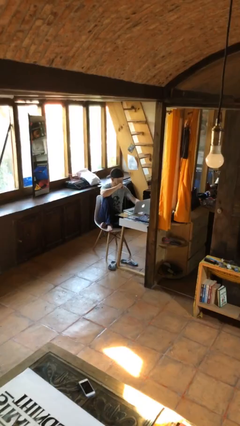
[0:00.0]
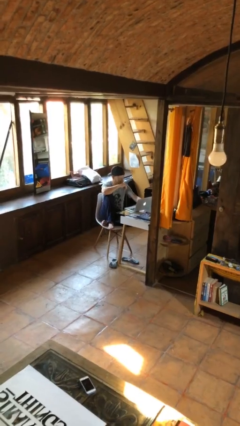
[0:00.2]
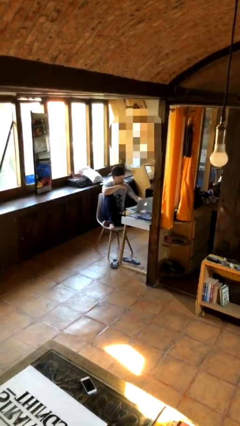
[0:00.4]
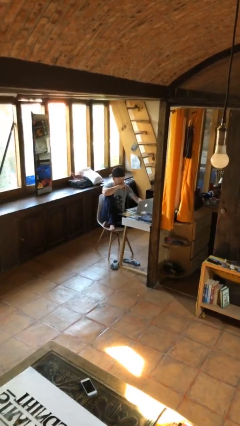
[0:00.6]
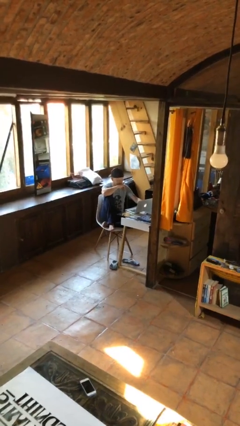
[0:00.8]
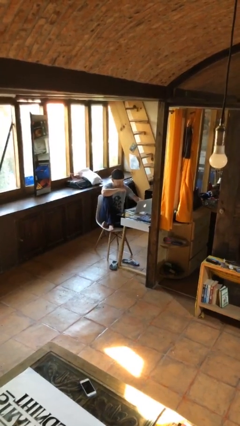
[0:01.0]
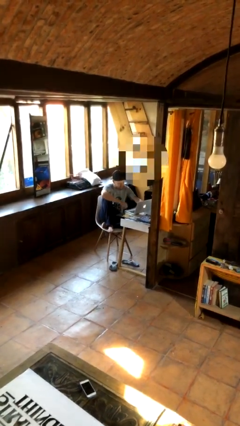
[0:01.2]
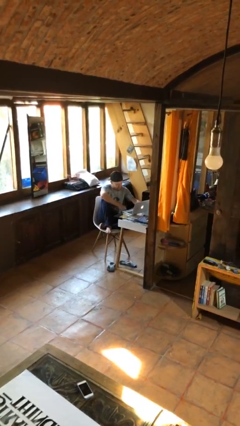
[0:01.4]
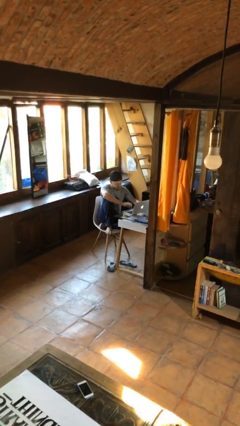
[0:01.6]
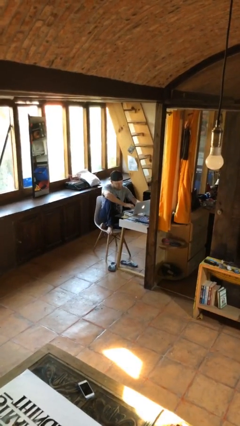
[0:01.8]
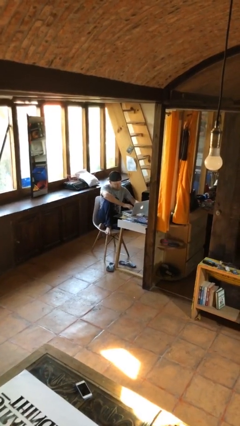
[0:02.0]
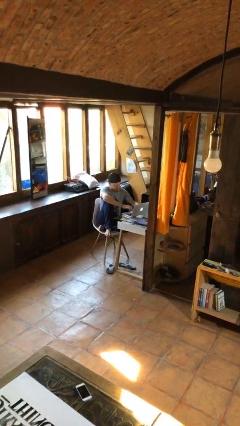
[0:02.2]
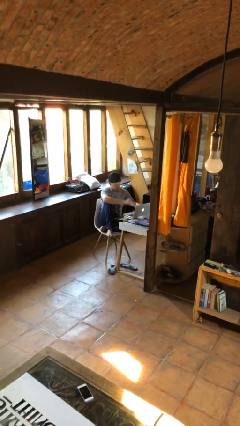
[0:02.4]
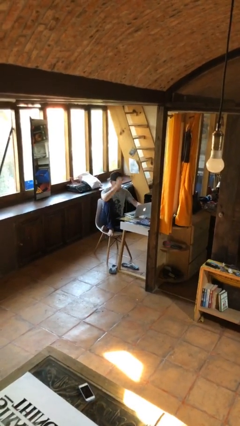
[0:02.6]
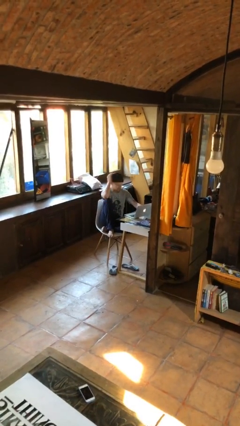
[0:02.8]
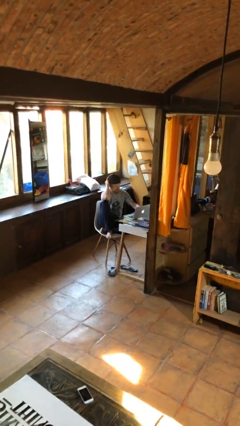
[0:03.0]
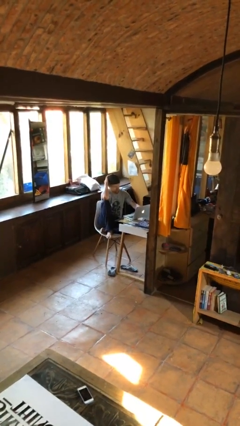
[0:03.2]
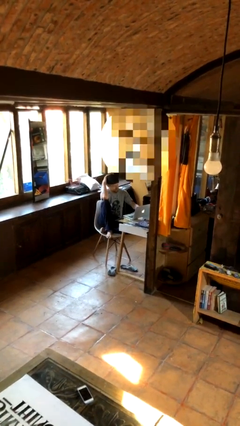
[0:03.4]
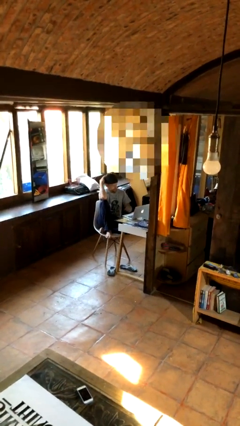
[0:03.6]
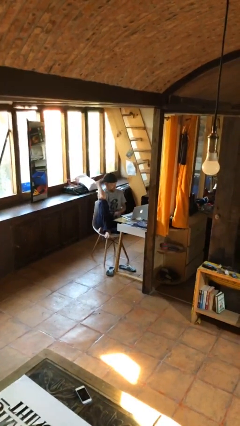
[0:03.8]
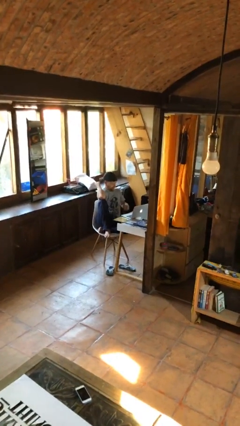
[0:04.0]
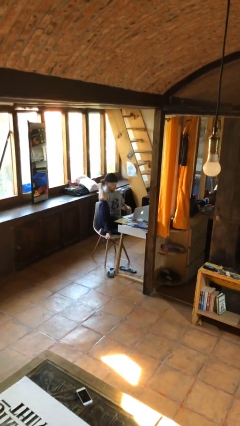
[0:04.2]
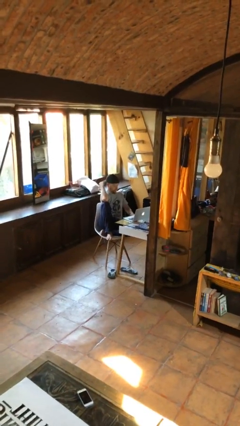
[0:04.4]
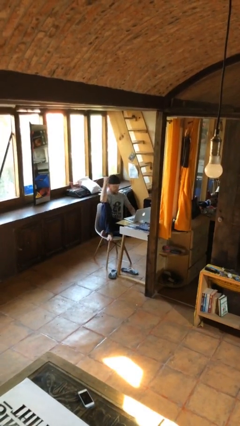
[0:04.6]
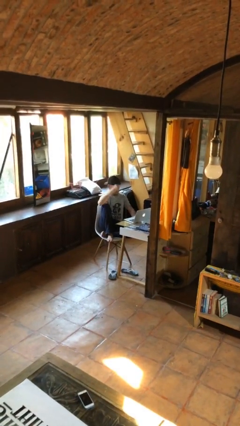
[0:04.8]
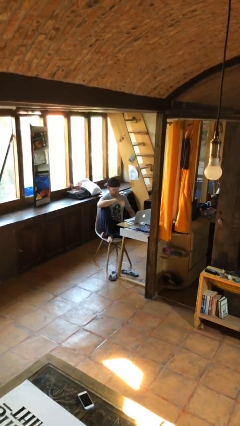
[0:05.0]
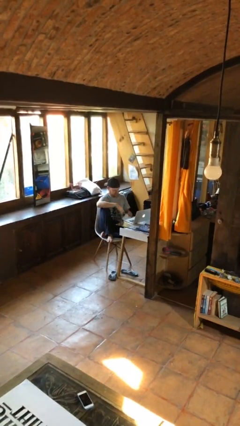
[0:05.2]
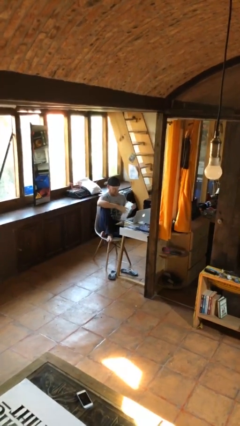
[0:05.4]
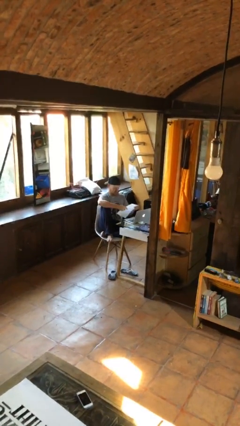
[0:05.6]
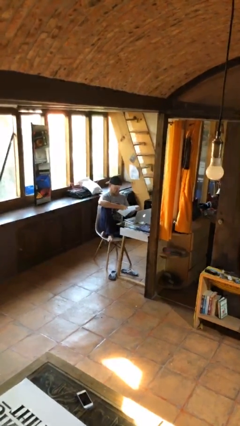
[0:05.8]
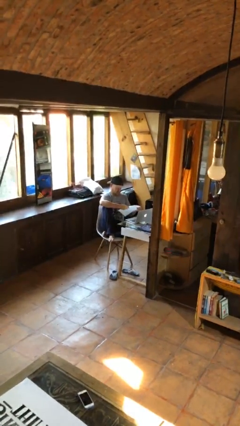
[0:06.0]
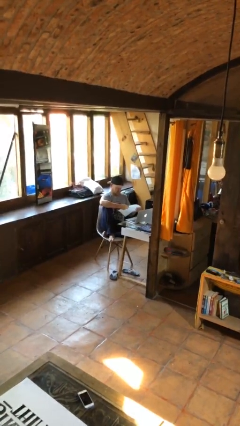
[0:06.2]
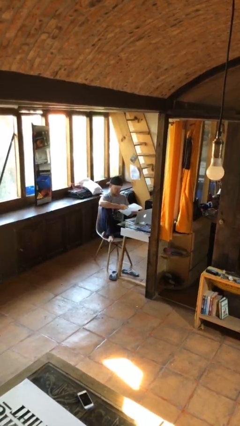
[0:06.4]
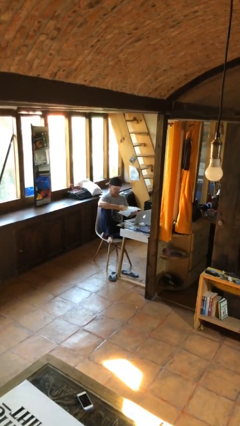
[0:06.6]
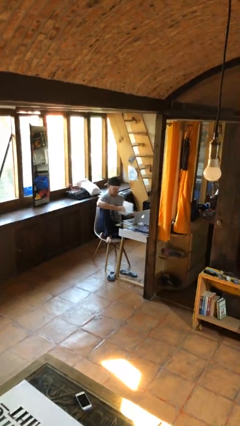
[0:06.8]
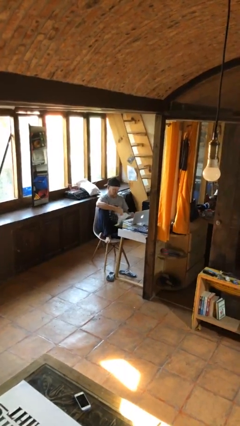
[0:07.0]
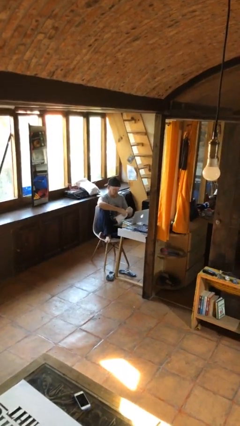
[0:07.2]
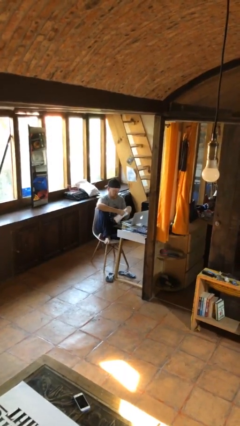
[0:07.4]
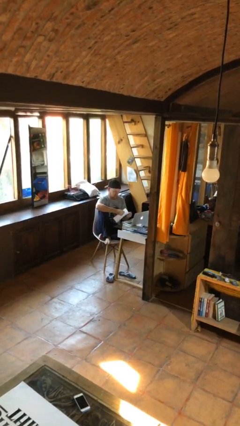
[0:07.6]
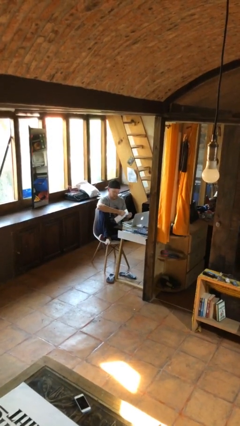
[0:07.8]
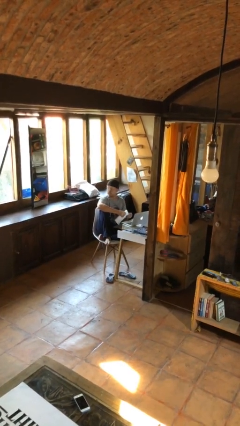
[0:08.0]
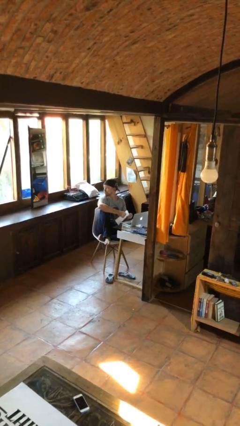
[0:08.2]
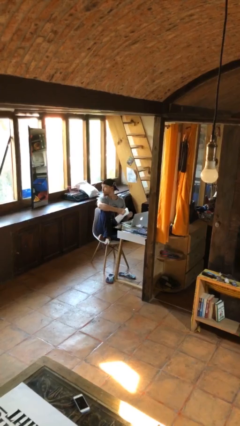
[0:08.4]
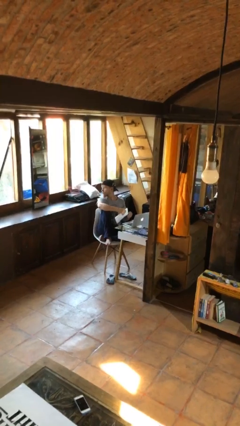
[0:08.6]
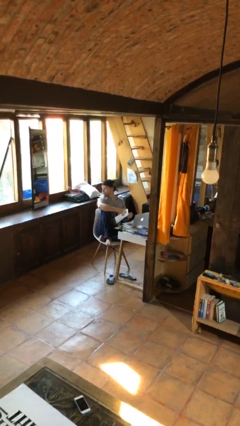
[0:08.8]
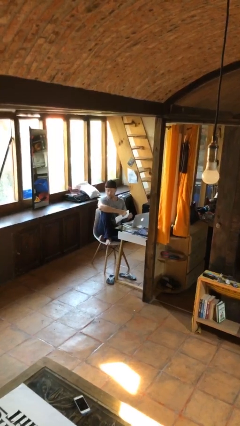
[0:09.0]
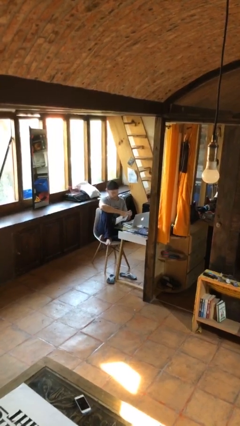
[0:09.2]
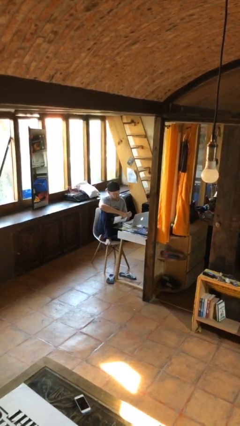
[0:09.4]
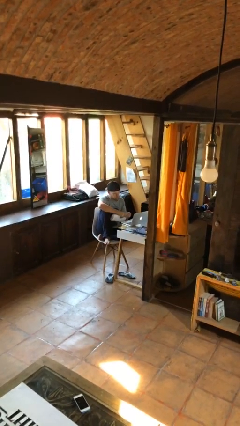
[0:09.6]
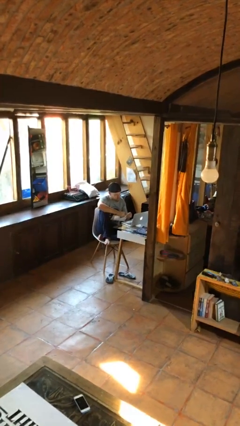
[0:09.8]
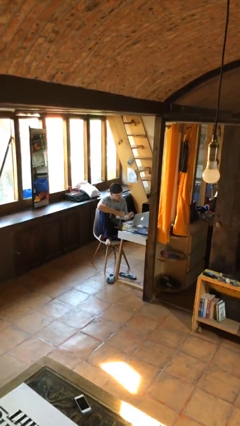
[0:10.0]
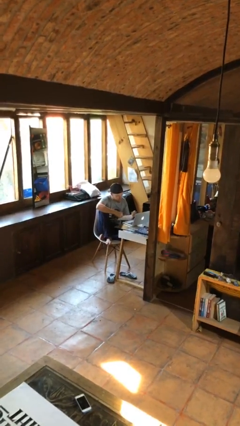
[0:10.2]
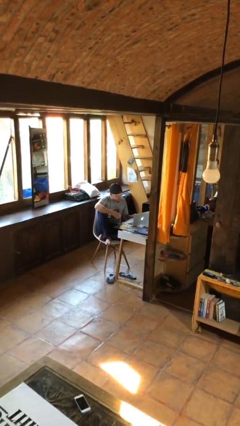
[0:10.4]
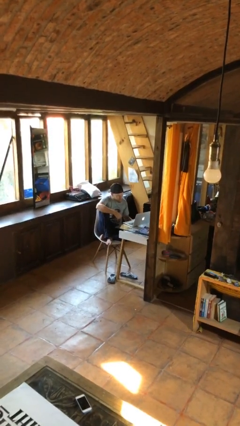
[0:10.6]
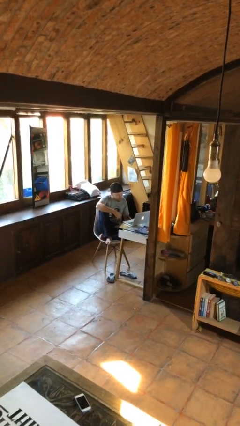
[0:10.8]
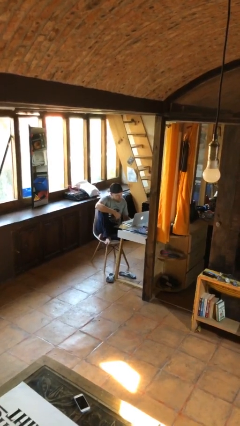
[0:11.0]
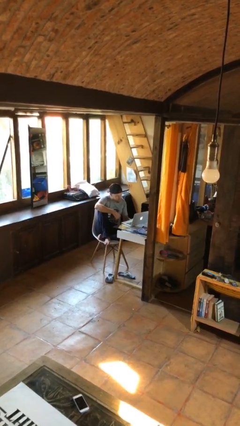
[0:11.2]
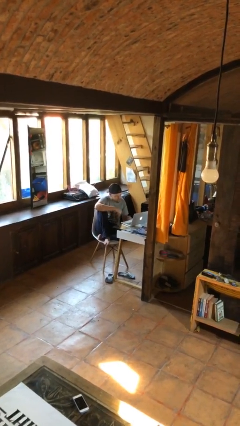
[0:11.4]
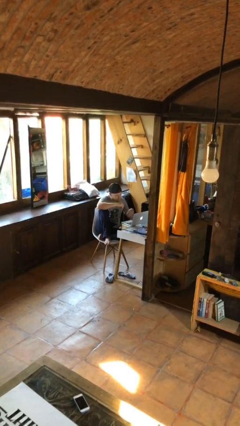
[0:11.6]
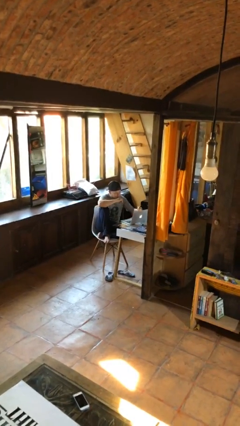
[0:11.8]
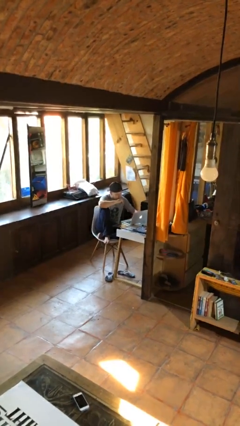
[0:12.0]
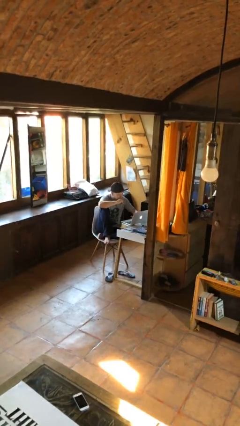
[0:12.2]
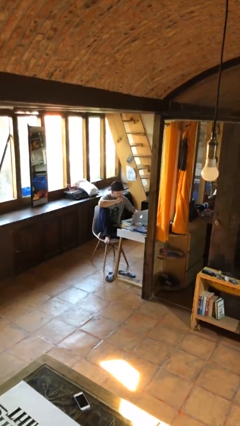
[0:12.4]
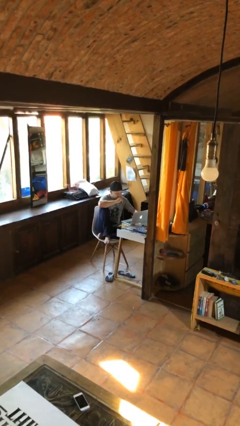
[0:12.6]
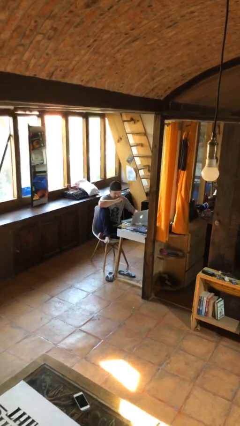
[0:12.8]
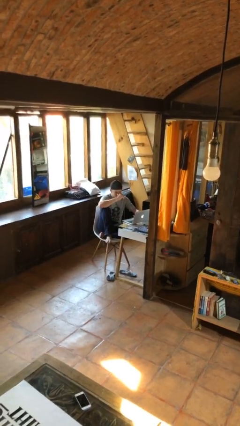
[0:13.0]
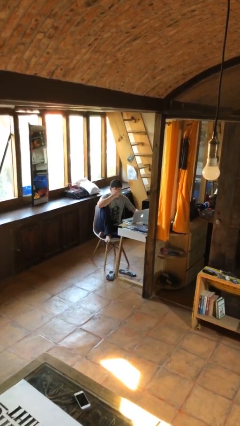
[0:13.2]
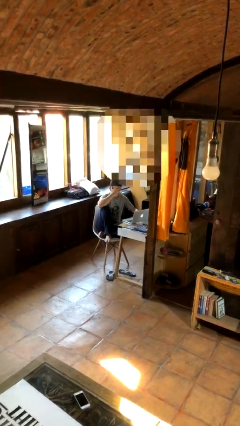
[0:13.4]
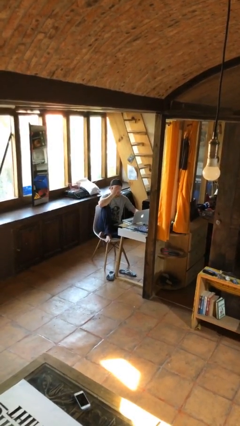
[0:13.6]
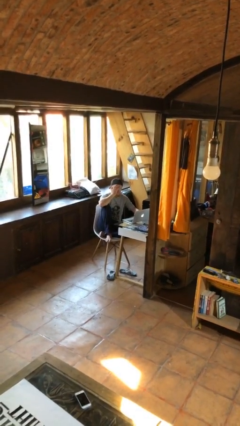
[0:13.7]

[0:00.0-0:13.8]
person interacts with laptop

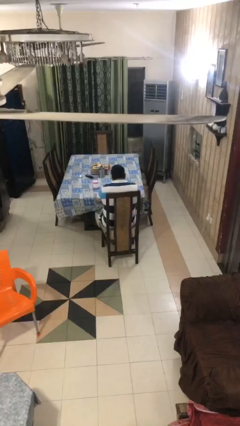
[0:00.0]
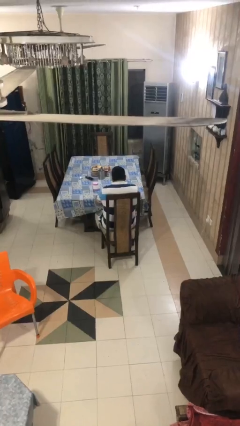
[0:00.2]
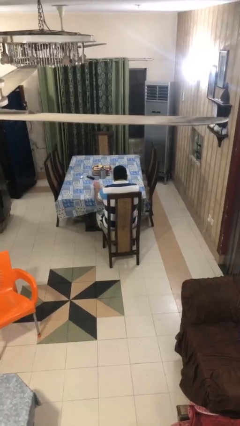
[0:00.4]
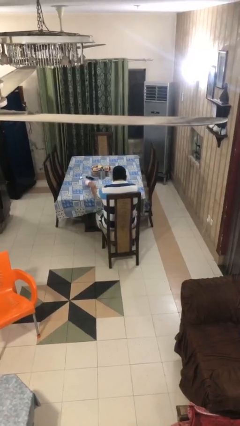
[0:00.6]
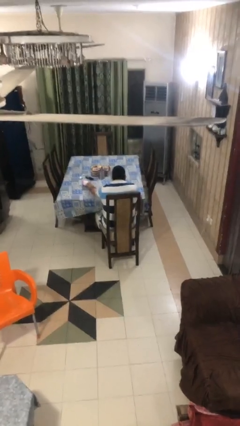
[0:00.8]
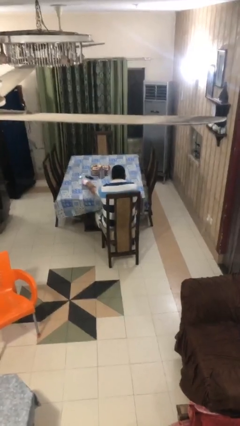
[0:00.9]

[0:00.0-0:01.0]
person knocks over glass

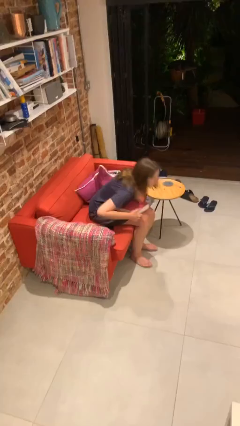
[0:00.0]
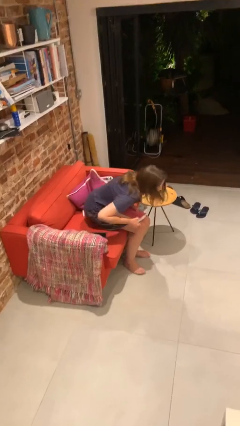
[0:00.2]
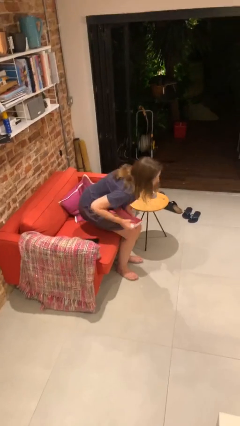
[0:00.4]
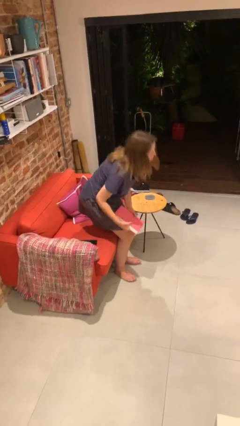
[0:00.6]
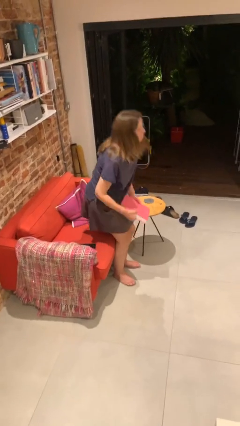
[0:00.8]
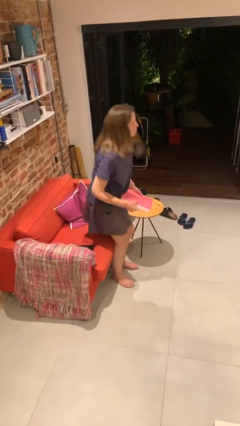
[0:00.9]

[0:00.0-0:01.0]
person stands up

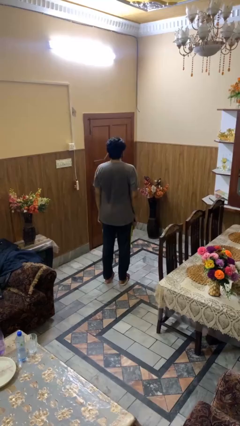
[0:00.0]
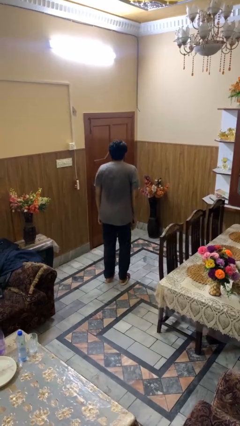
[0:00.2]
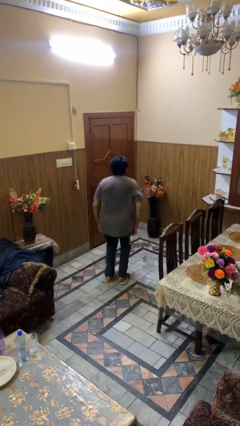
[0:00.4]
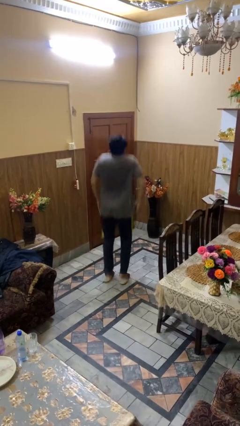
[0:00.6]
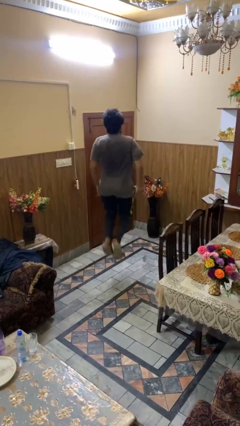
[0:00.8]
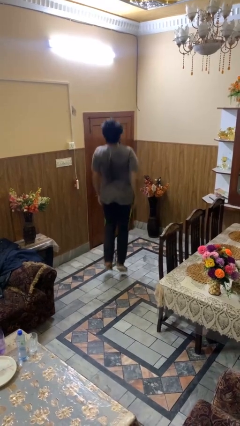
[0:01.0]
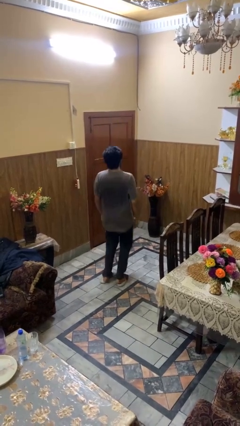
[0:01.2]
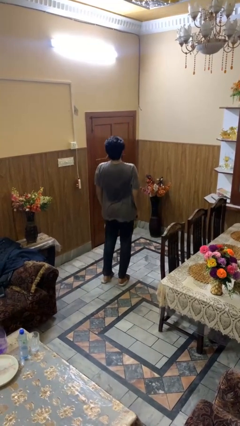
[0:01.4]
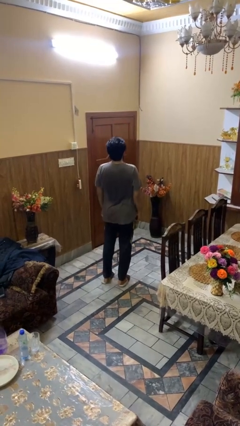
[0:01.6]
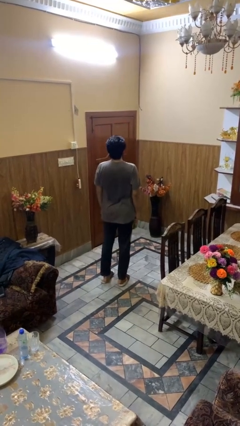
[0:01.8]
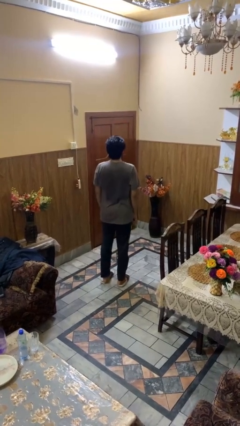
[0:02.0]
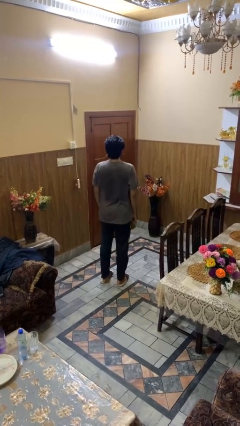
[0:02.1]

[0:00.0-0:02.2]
person jumps
